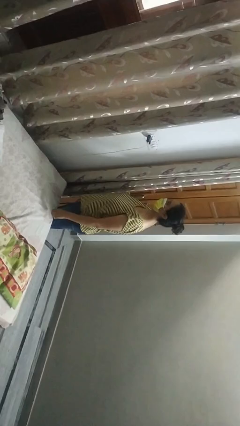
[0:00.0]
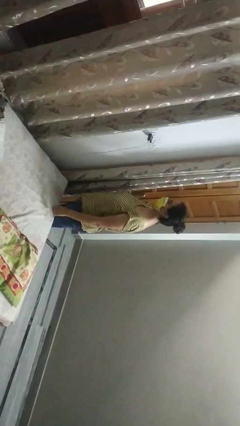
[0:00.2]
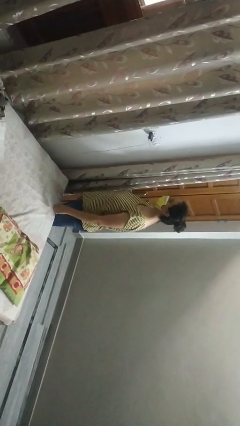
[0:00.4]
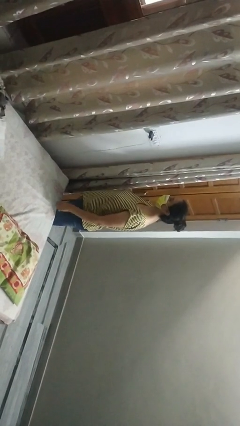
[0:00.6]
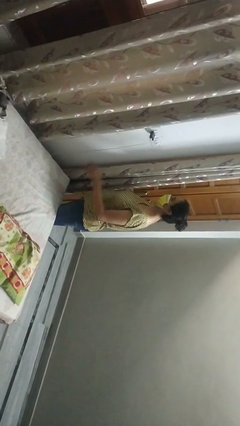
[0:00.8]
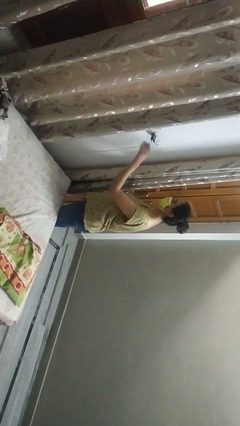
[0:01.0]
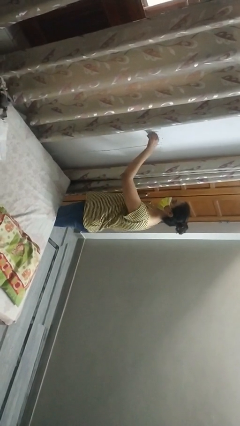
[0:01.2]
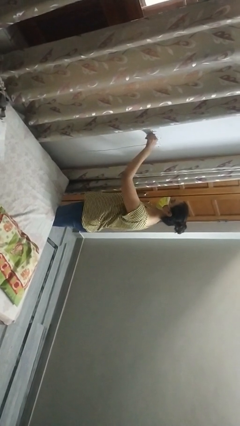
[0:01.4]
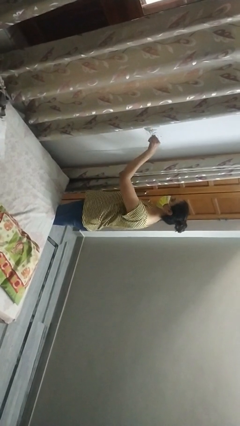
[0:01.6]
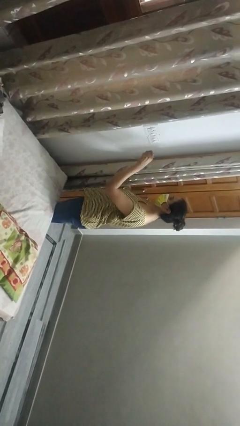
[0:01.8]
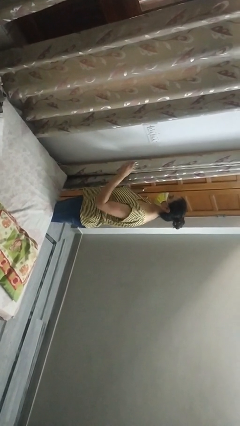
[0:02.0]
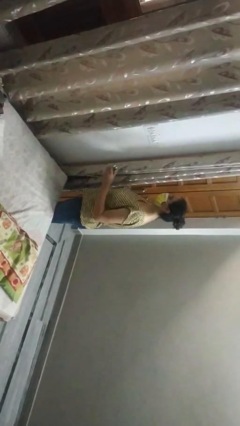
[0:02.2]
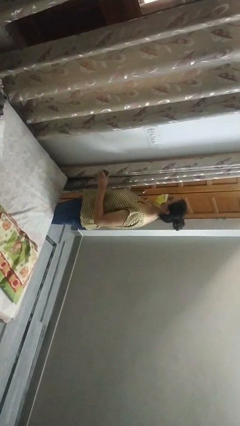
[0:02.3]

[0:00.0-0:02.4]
person unplugs from electrical socket

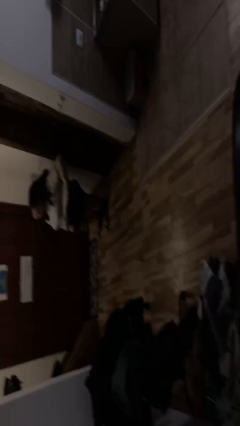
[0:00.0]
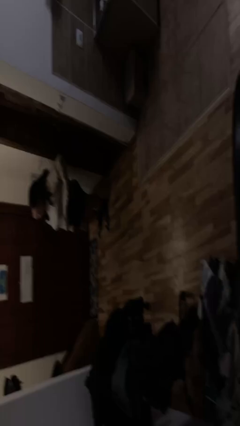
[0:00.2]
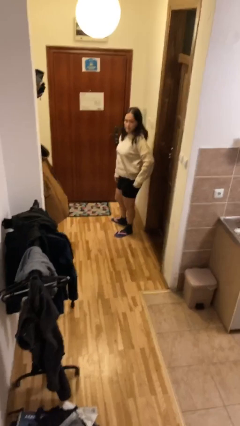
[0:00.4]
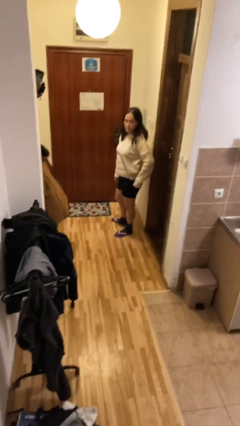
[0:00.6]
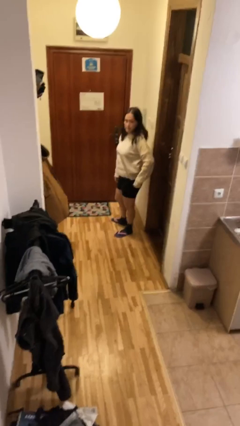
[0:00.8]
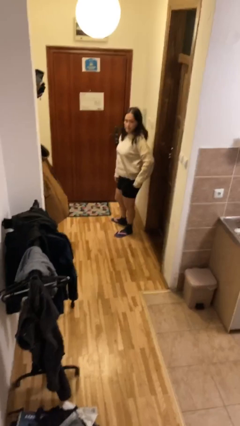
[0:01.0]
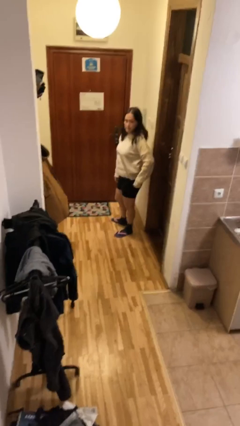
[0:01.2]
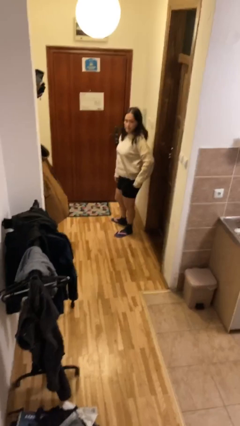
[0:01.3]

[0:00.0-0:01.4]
person opens facility door

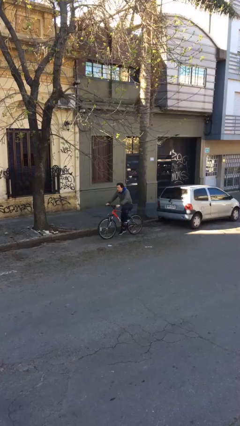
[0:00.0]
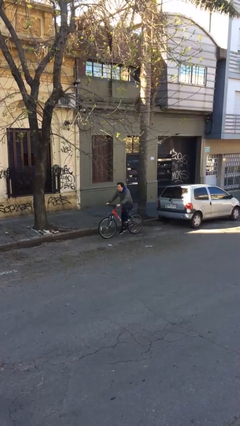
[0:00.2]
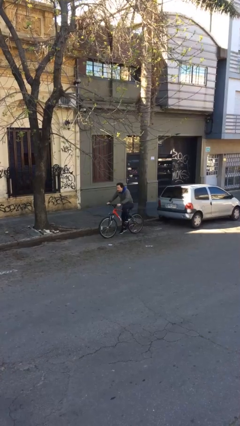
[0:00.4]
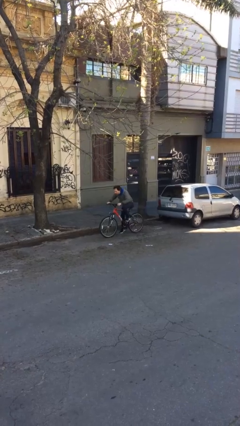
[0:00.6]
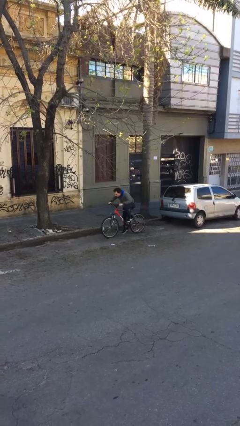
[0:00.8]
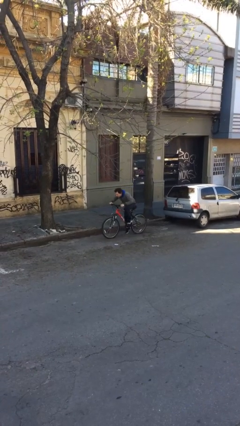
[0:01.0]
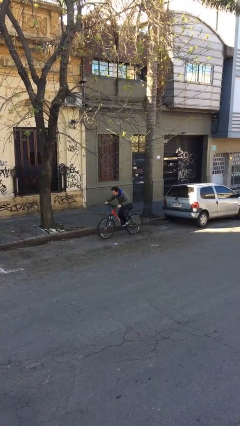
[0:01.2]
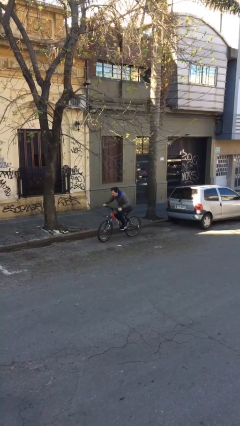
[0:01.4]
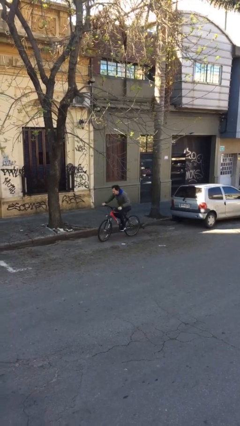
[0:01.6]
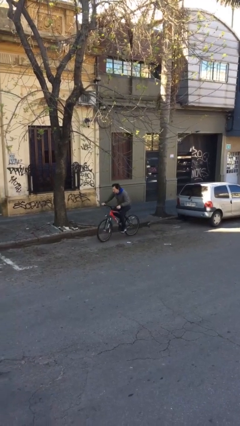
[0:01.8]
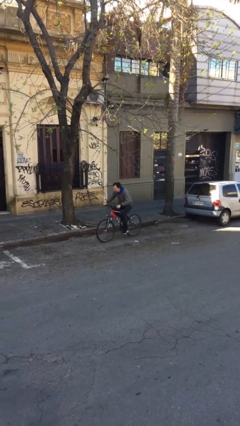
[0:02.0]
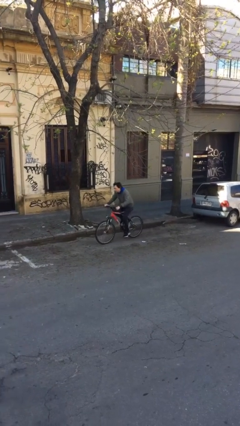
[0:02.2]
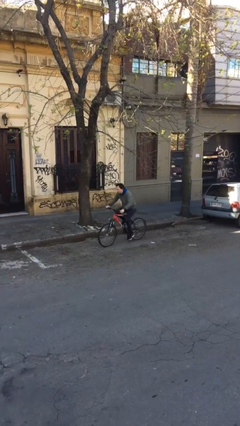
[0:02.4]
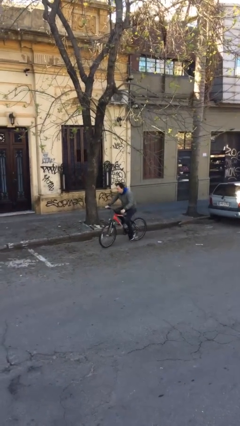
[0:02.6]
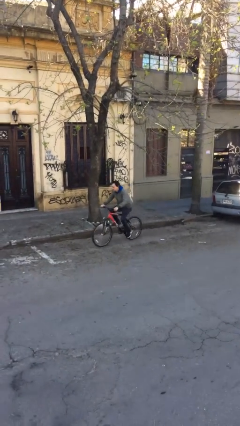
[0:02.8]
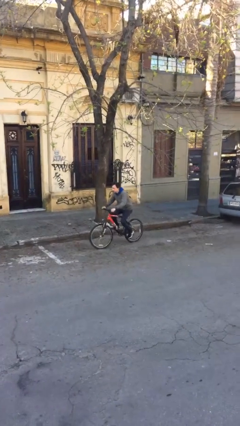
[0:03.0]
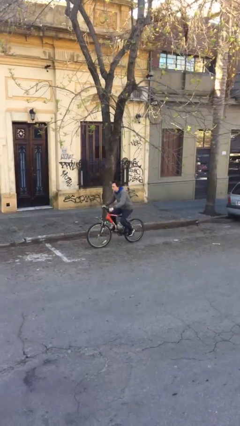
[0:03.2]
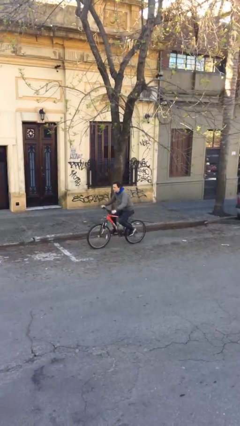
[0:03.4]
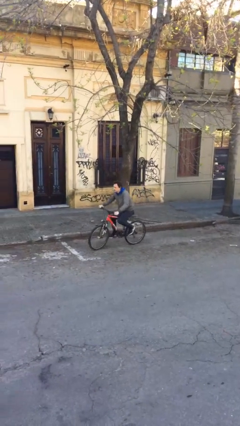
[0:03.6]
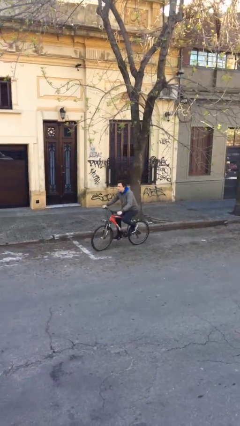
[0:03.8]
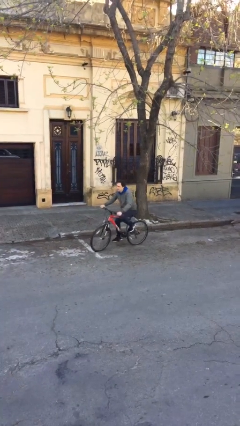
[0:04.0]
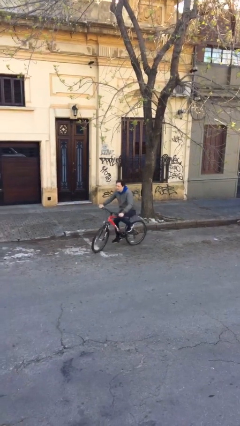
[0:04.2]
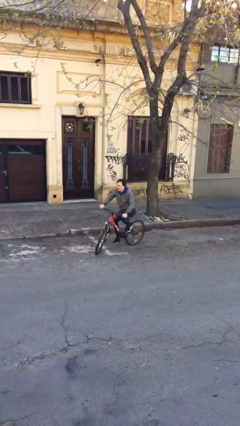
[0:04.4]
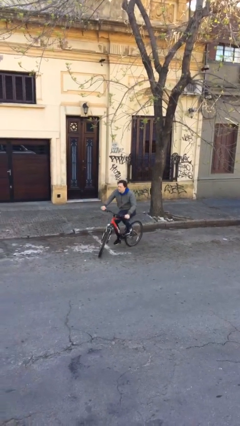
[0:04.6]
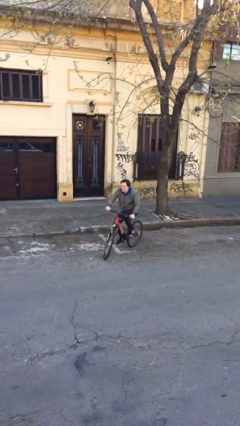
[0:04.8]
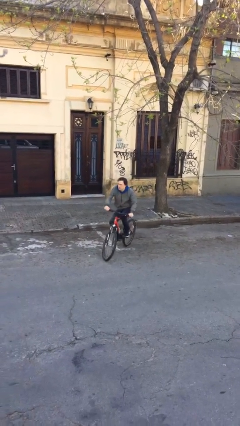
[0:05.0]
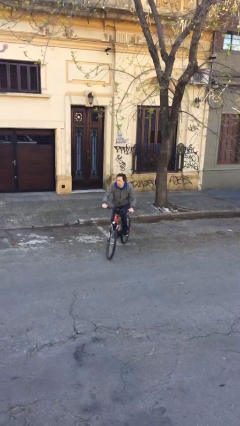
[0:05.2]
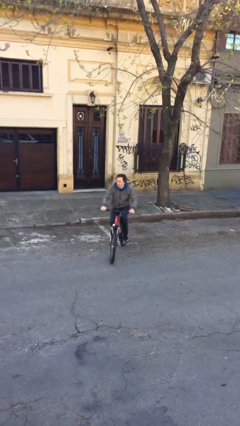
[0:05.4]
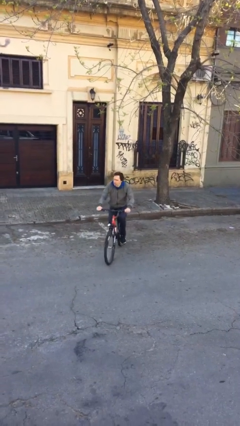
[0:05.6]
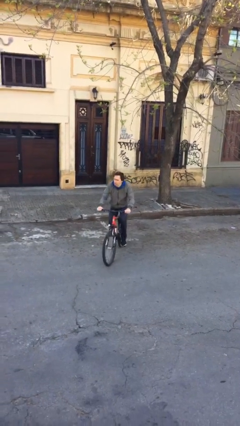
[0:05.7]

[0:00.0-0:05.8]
person rides bicycle

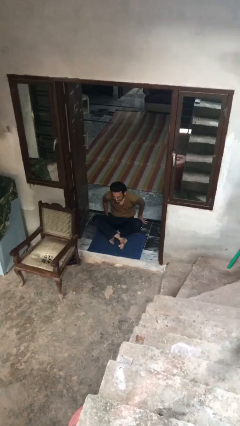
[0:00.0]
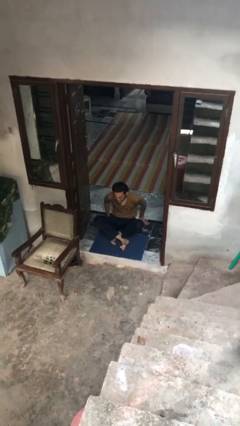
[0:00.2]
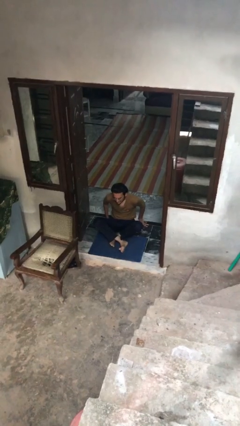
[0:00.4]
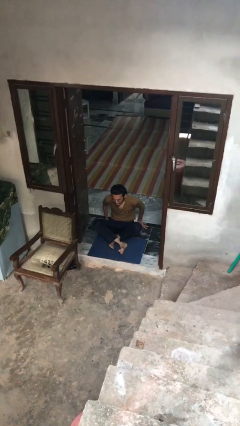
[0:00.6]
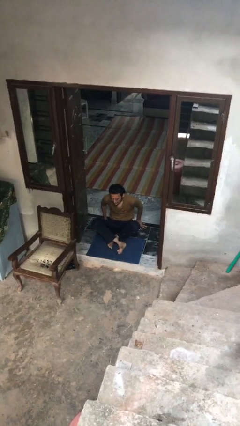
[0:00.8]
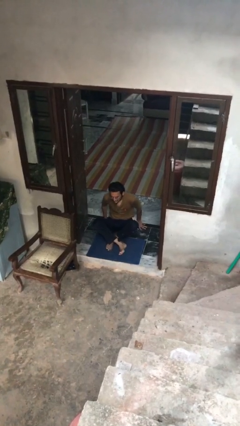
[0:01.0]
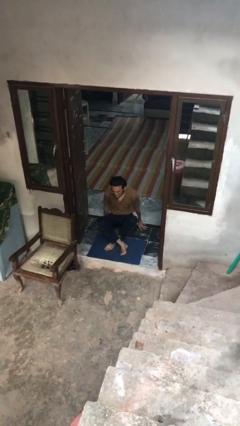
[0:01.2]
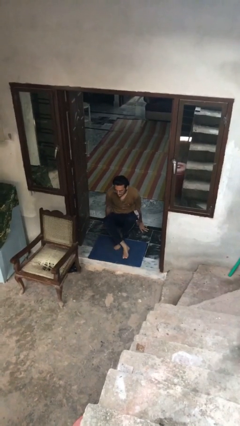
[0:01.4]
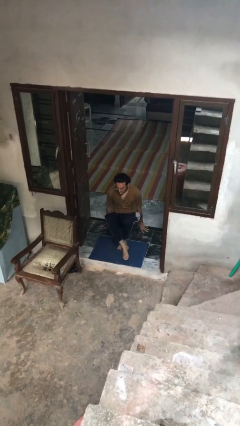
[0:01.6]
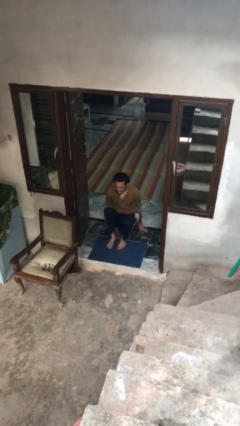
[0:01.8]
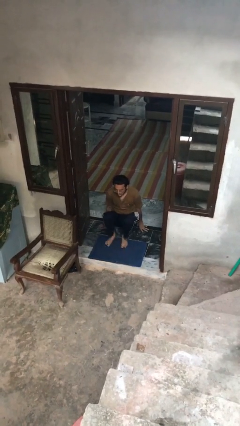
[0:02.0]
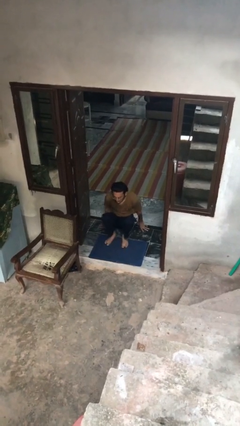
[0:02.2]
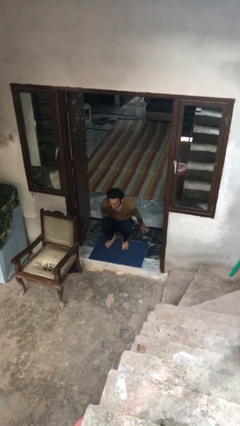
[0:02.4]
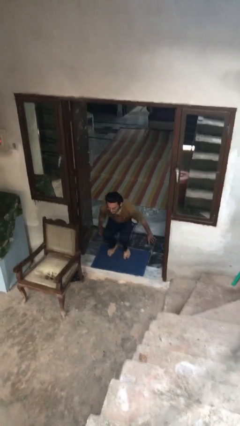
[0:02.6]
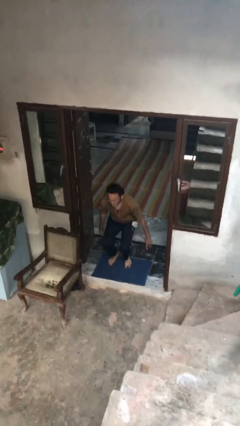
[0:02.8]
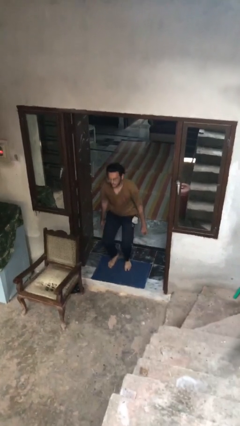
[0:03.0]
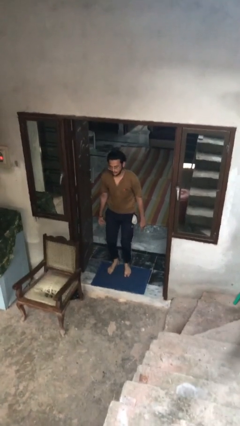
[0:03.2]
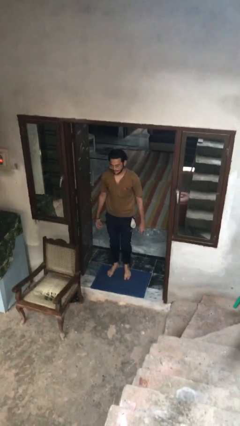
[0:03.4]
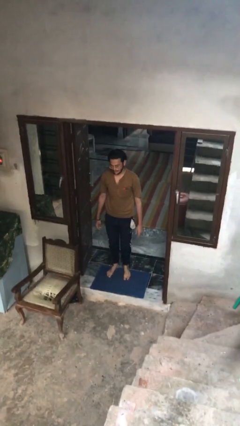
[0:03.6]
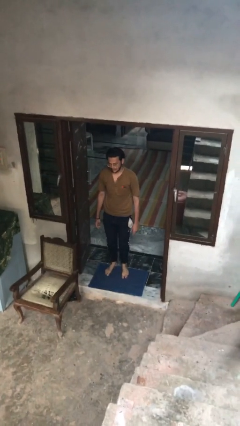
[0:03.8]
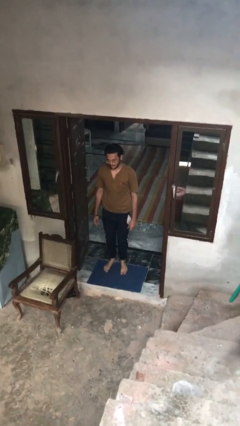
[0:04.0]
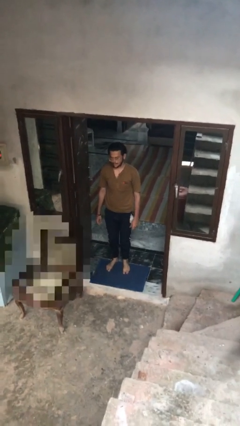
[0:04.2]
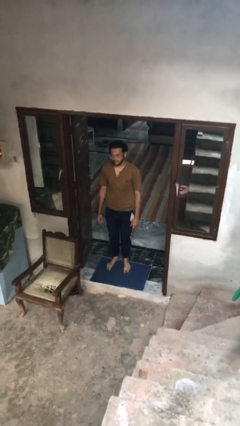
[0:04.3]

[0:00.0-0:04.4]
person stands up from floor

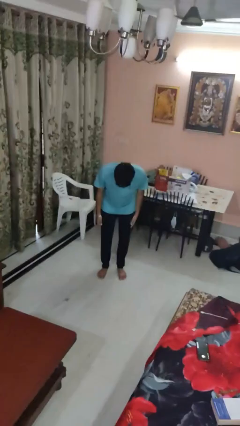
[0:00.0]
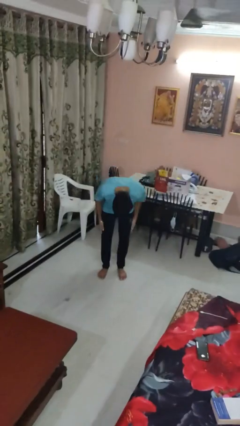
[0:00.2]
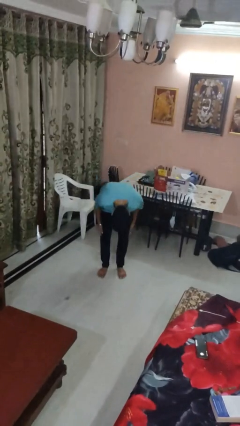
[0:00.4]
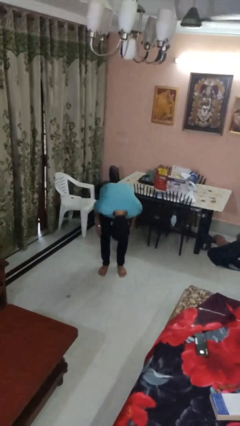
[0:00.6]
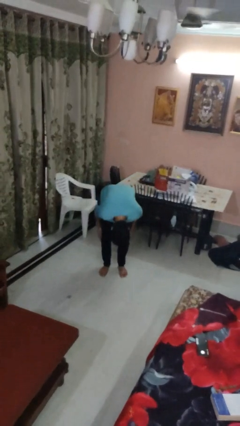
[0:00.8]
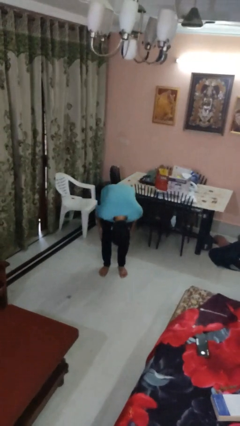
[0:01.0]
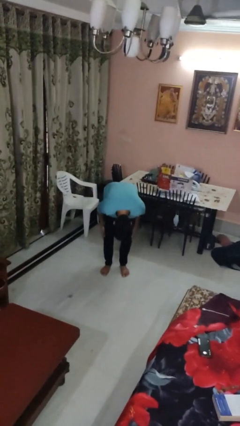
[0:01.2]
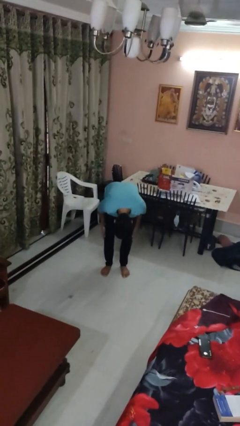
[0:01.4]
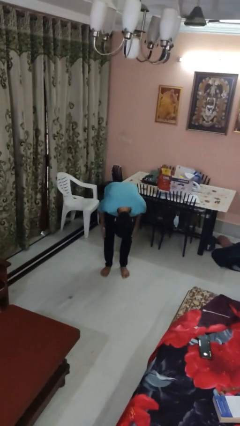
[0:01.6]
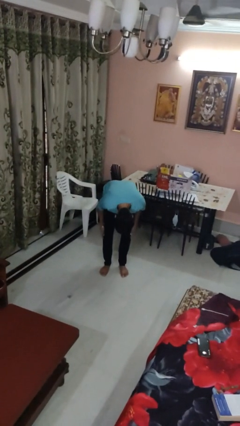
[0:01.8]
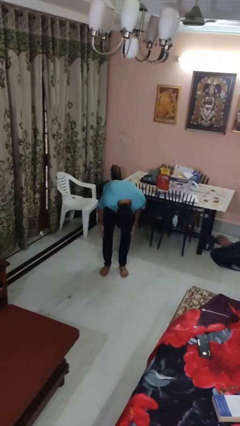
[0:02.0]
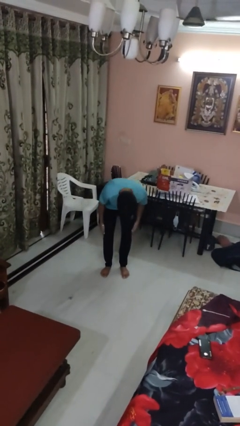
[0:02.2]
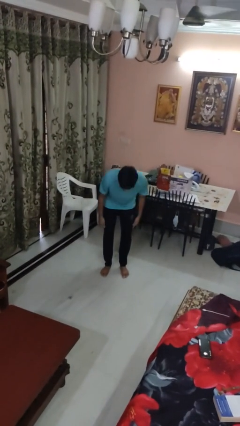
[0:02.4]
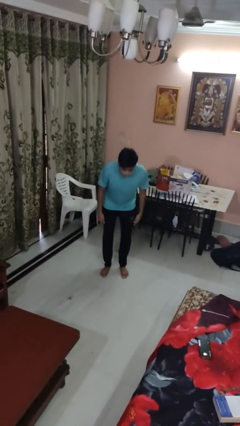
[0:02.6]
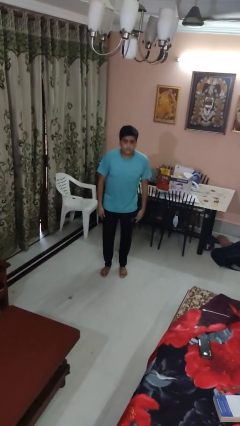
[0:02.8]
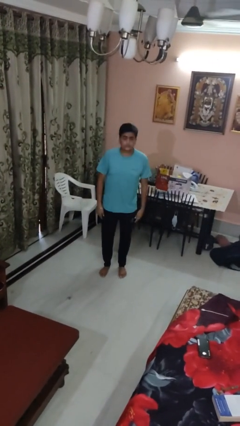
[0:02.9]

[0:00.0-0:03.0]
person bows

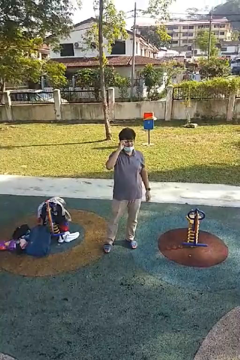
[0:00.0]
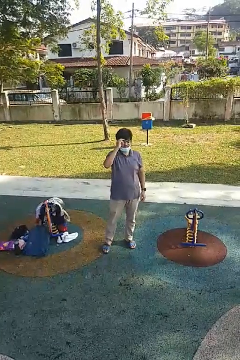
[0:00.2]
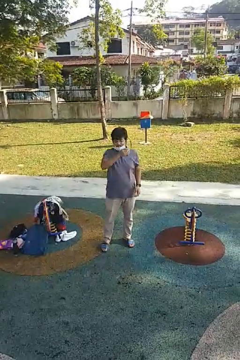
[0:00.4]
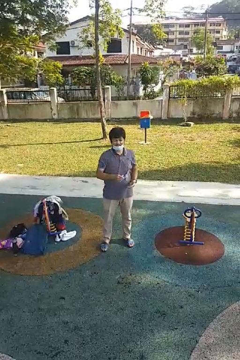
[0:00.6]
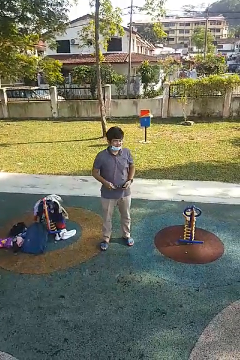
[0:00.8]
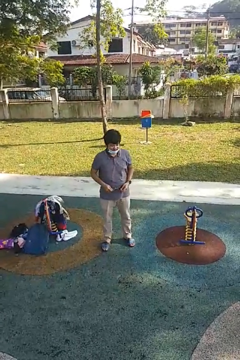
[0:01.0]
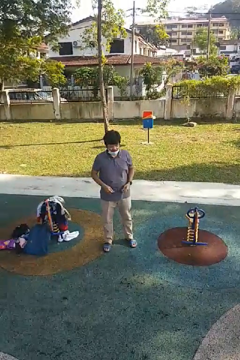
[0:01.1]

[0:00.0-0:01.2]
person takes off glasses
